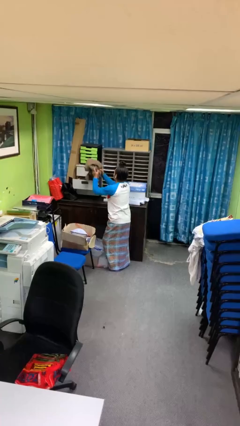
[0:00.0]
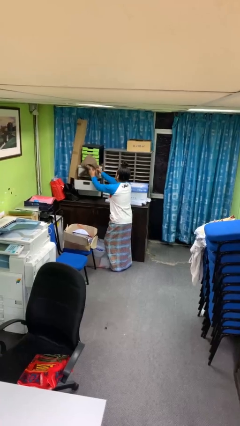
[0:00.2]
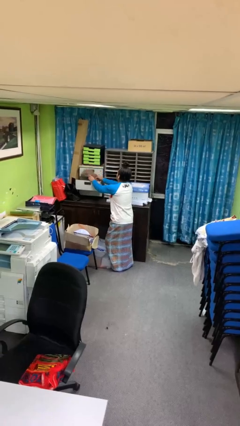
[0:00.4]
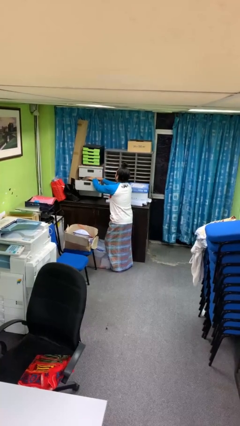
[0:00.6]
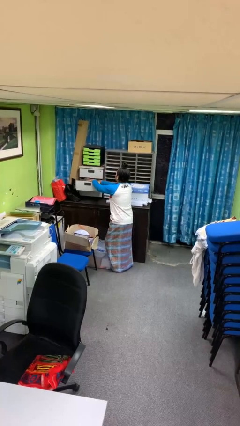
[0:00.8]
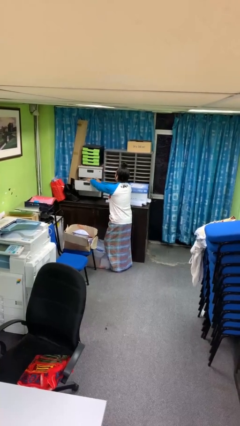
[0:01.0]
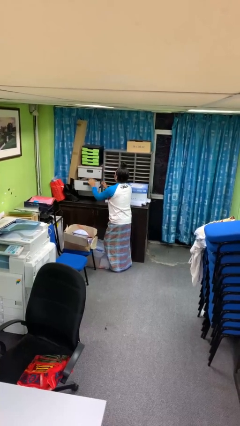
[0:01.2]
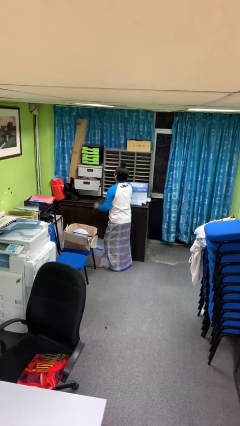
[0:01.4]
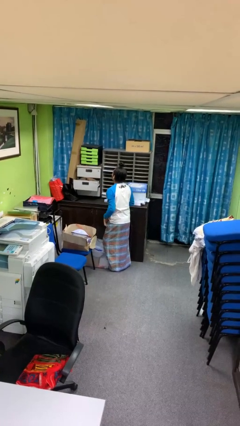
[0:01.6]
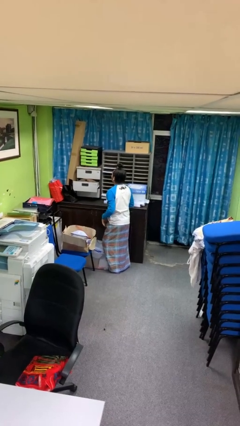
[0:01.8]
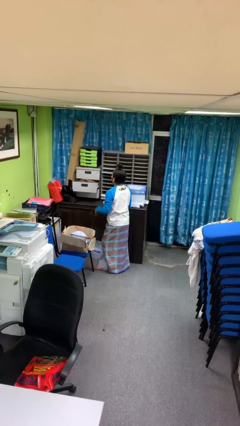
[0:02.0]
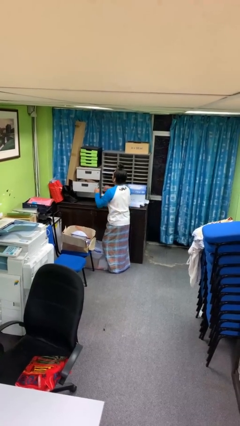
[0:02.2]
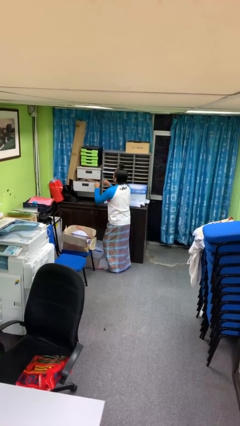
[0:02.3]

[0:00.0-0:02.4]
person puts clothes into dresser

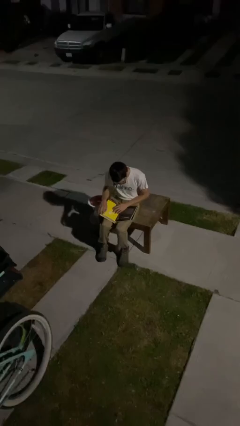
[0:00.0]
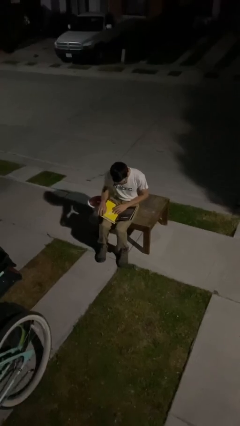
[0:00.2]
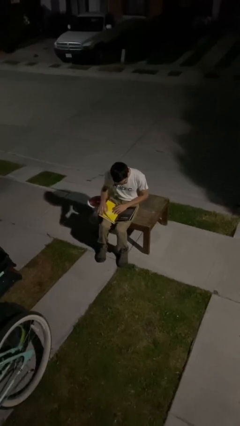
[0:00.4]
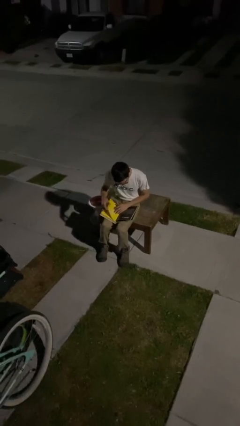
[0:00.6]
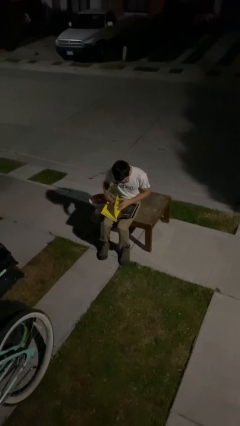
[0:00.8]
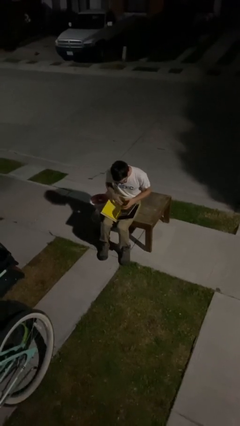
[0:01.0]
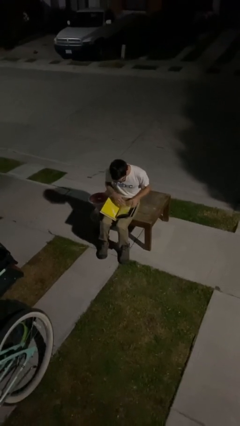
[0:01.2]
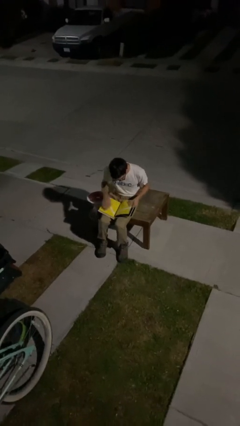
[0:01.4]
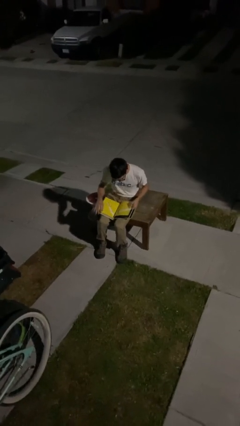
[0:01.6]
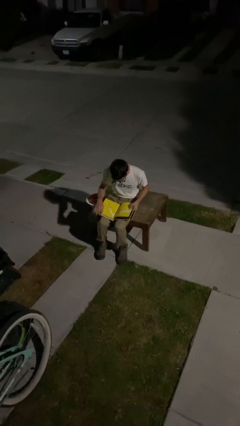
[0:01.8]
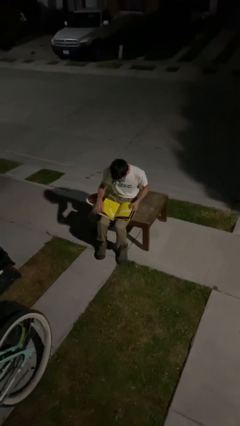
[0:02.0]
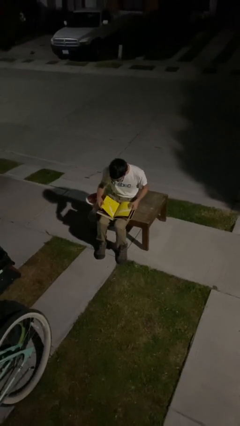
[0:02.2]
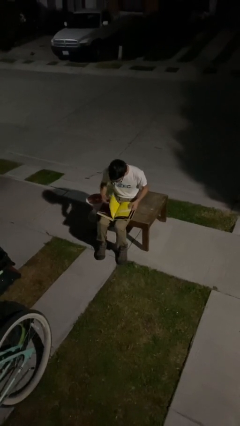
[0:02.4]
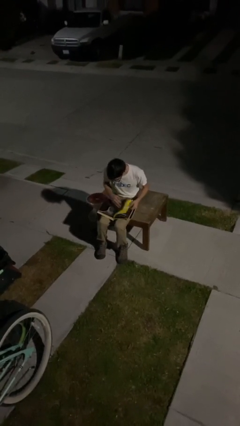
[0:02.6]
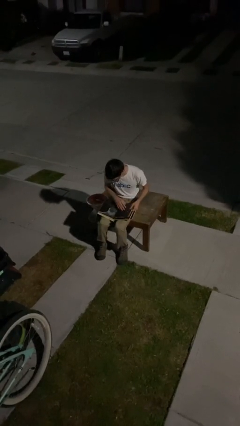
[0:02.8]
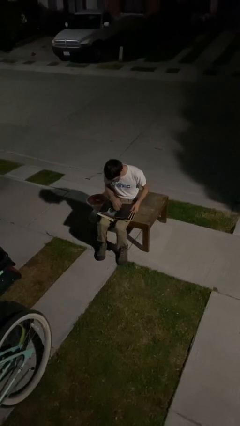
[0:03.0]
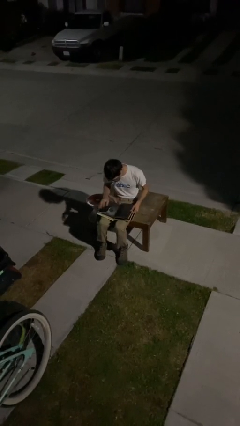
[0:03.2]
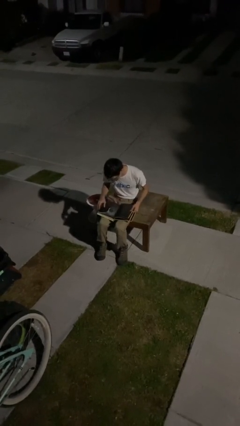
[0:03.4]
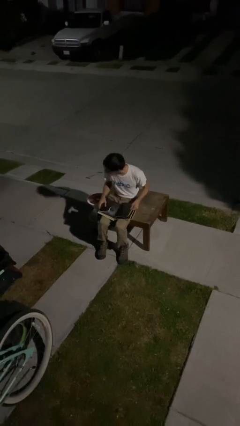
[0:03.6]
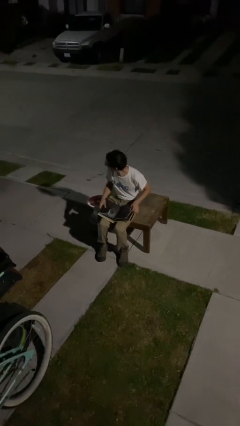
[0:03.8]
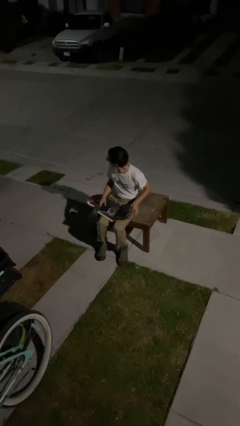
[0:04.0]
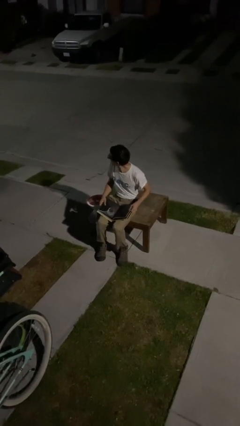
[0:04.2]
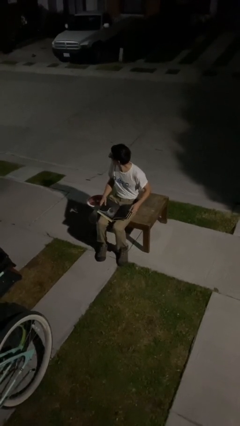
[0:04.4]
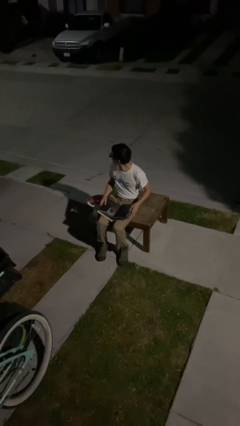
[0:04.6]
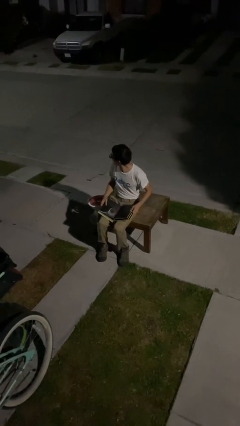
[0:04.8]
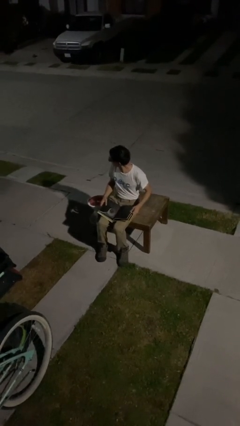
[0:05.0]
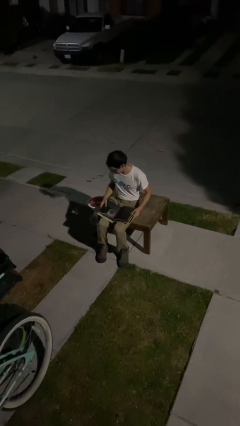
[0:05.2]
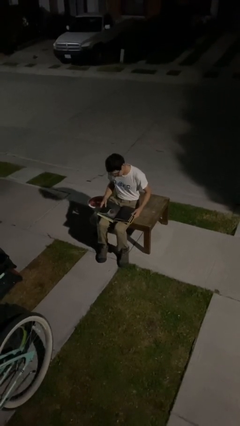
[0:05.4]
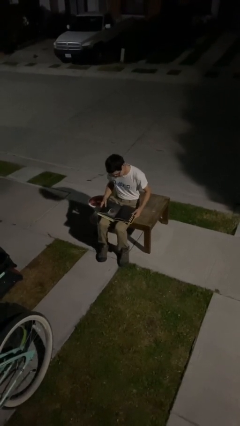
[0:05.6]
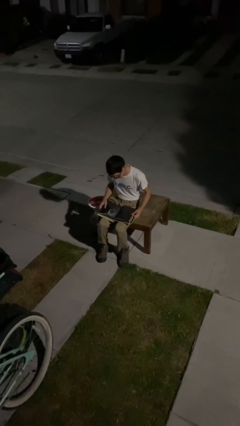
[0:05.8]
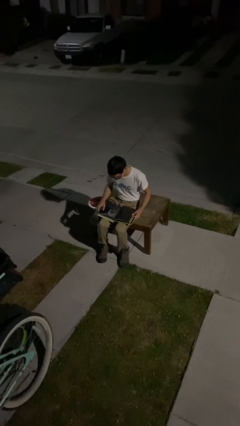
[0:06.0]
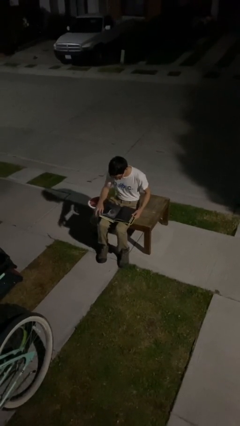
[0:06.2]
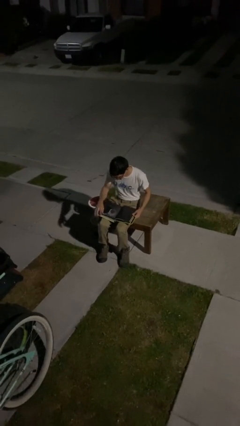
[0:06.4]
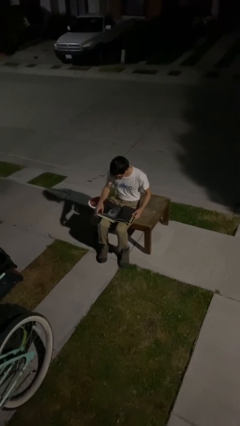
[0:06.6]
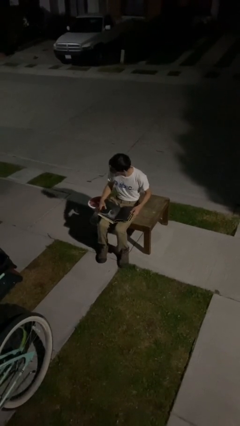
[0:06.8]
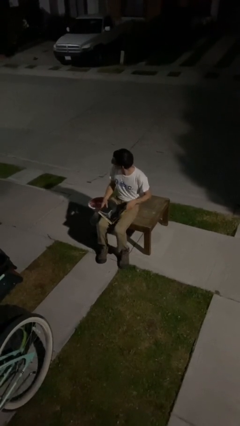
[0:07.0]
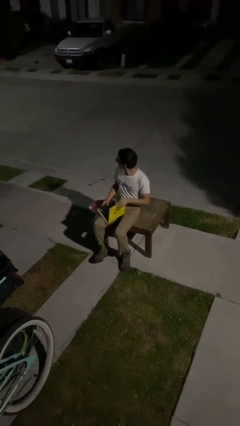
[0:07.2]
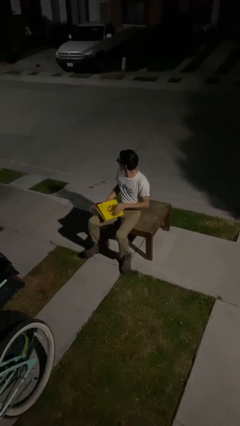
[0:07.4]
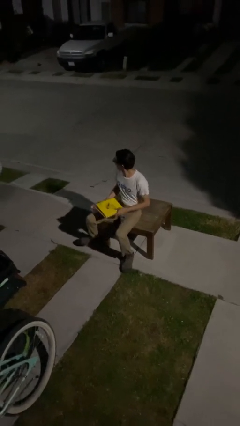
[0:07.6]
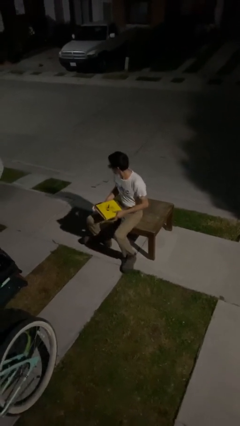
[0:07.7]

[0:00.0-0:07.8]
person reads document

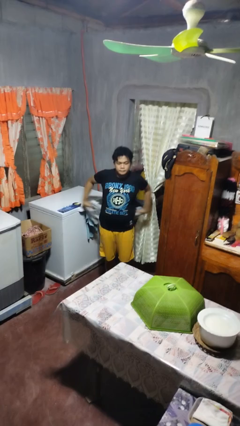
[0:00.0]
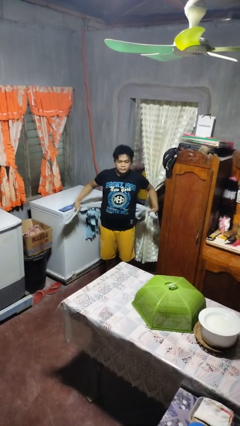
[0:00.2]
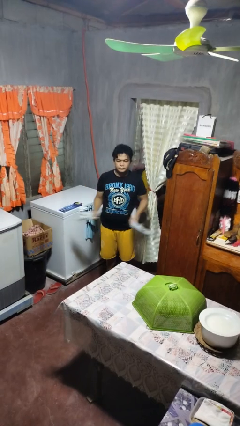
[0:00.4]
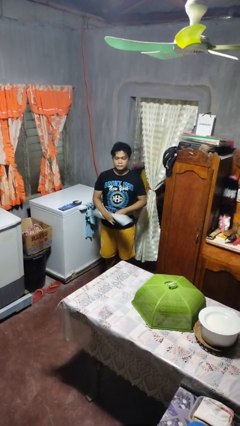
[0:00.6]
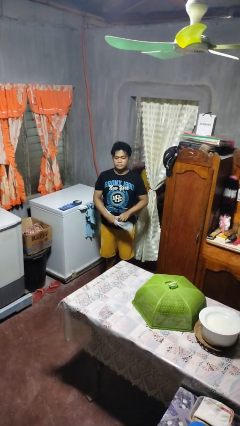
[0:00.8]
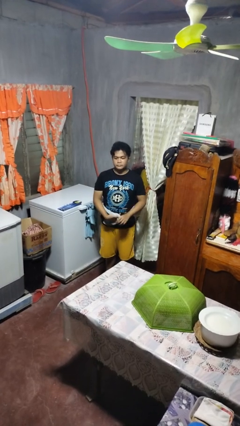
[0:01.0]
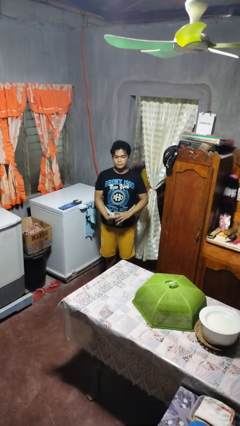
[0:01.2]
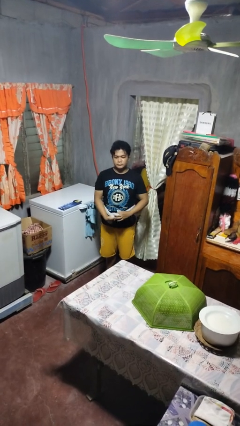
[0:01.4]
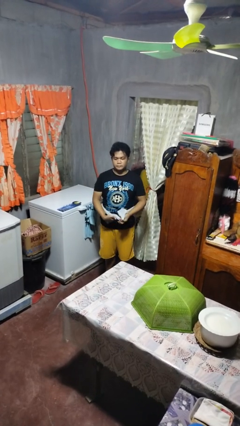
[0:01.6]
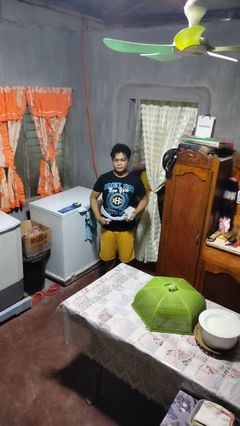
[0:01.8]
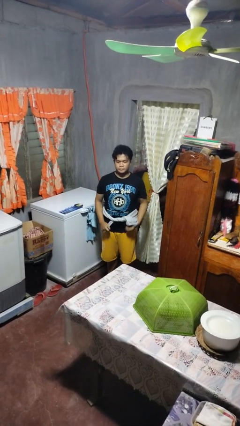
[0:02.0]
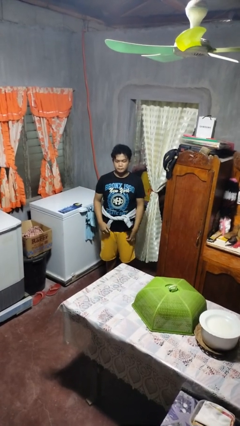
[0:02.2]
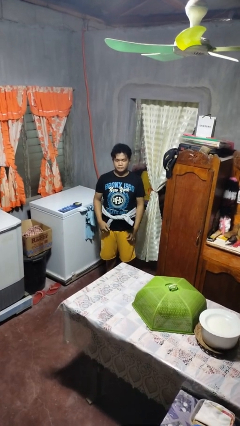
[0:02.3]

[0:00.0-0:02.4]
person ties jacket around waist

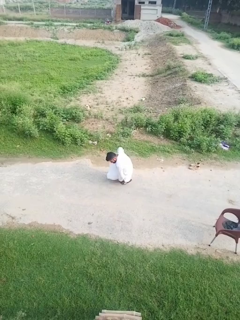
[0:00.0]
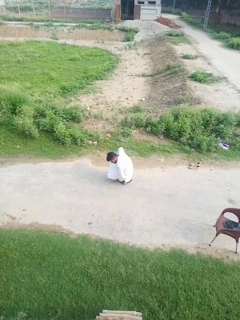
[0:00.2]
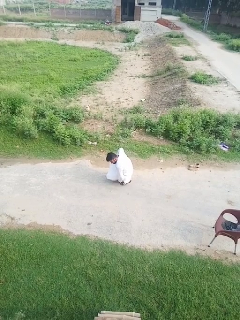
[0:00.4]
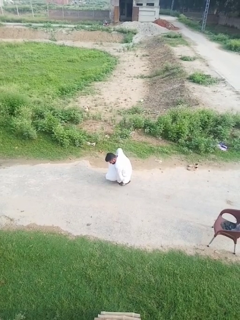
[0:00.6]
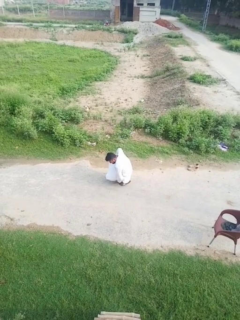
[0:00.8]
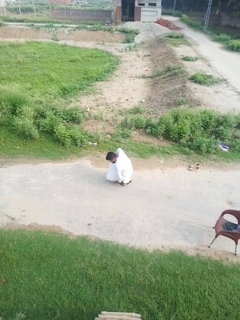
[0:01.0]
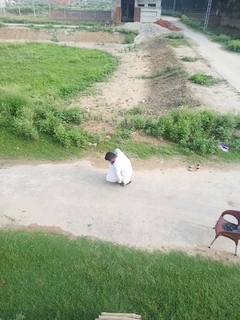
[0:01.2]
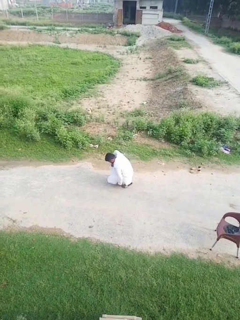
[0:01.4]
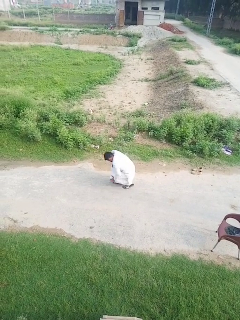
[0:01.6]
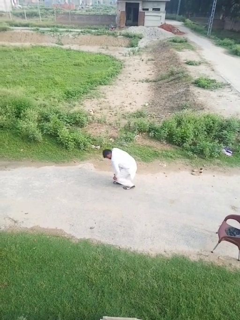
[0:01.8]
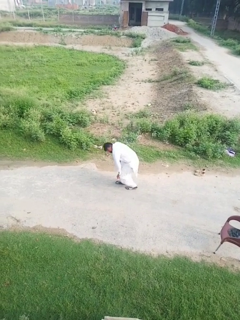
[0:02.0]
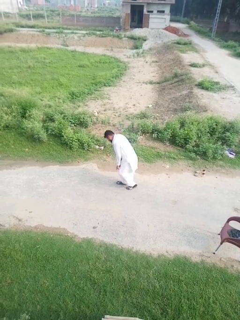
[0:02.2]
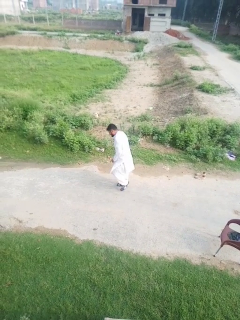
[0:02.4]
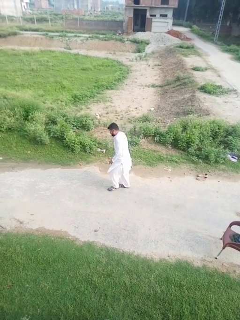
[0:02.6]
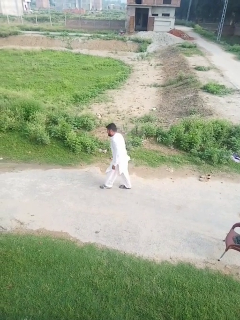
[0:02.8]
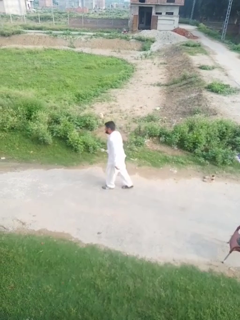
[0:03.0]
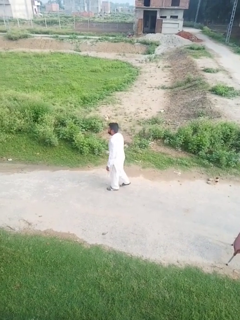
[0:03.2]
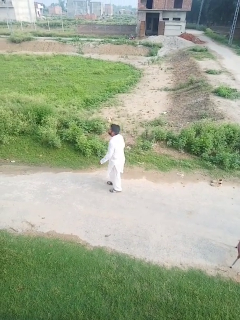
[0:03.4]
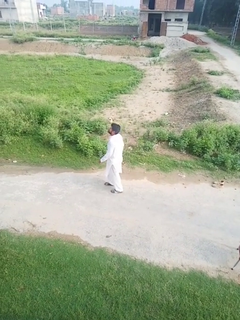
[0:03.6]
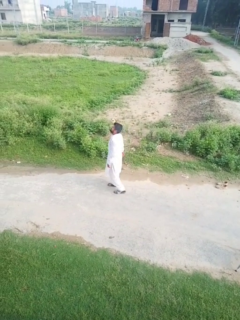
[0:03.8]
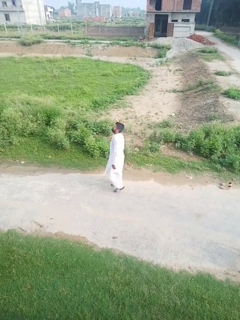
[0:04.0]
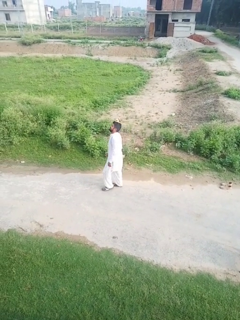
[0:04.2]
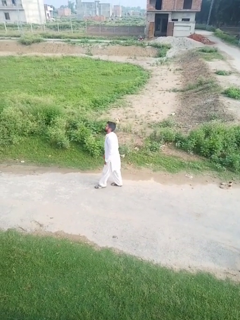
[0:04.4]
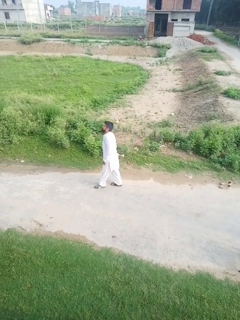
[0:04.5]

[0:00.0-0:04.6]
person stands up from floor

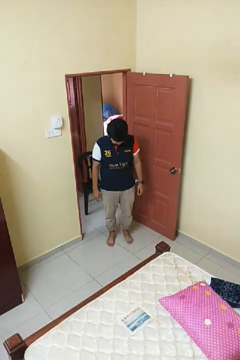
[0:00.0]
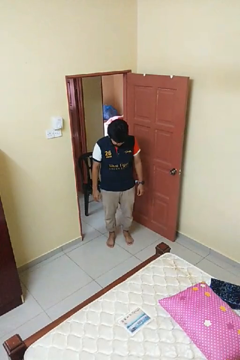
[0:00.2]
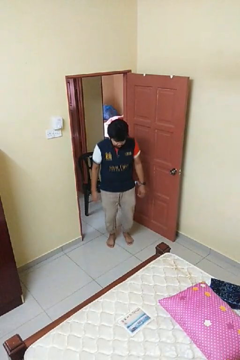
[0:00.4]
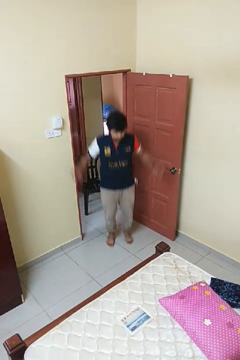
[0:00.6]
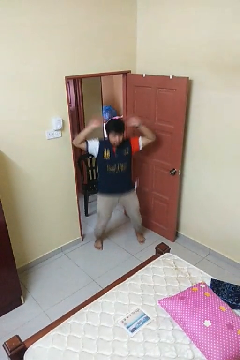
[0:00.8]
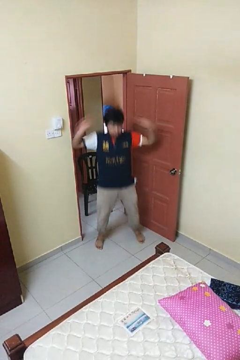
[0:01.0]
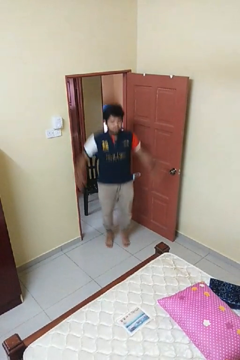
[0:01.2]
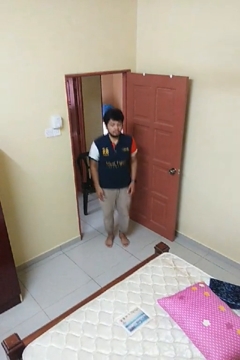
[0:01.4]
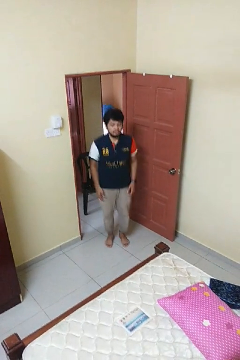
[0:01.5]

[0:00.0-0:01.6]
person exercises with jumping jacks
